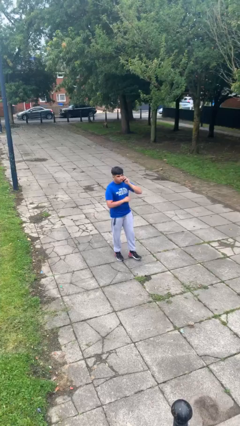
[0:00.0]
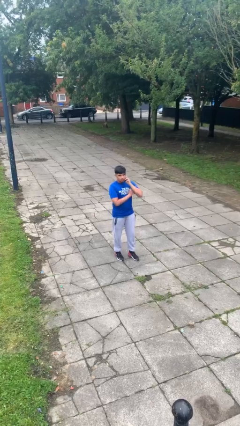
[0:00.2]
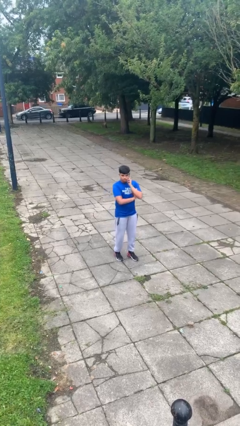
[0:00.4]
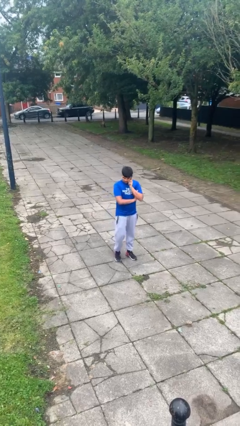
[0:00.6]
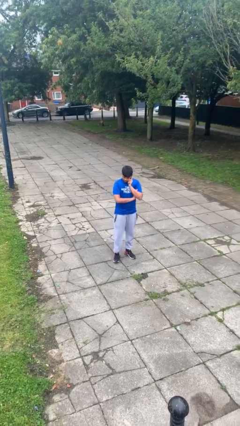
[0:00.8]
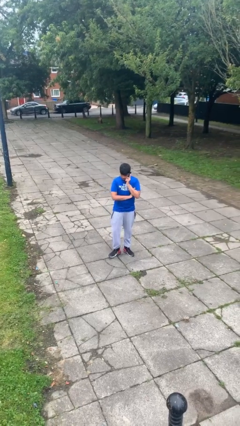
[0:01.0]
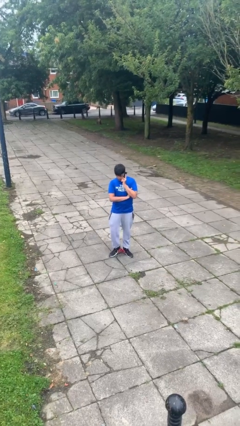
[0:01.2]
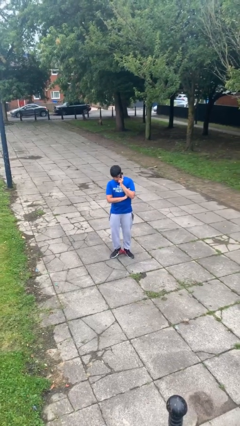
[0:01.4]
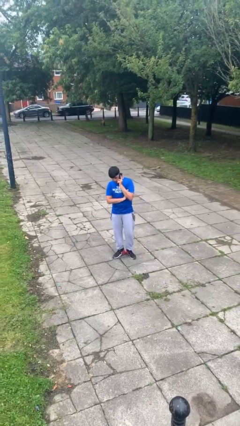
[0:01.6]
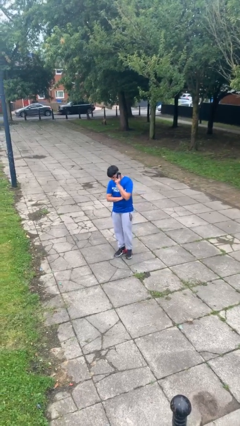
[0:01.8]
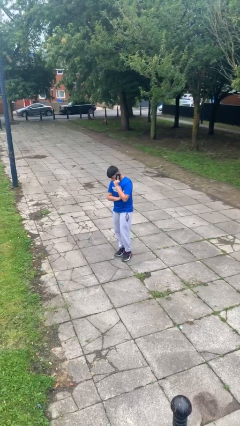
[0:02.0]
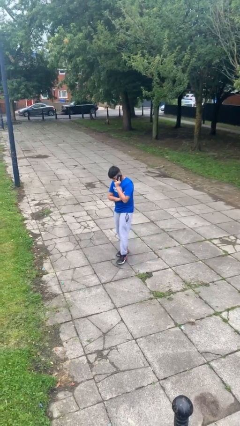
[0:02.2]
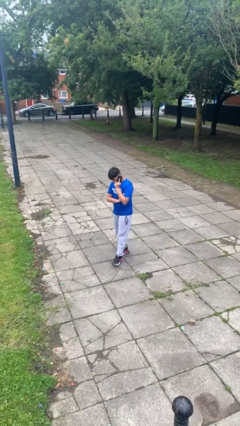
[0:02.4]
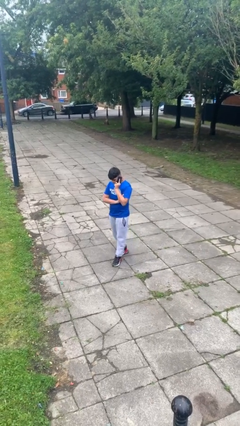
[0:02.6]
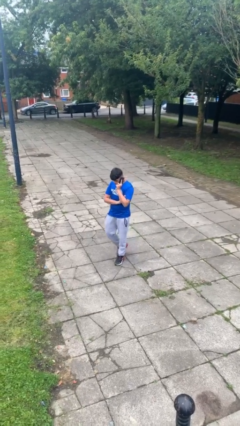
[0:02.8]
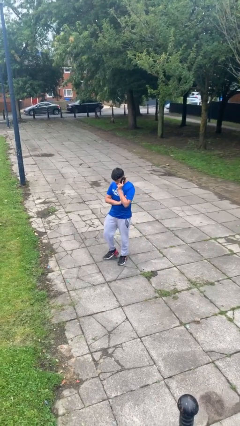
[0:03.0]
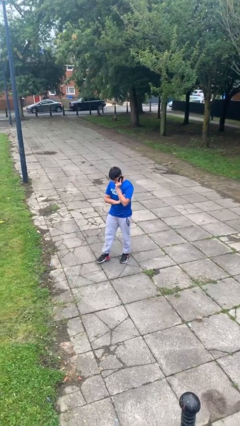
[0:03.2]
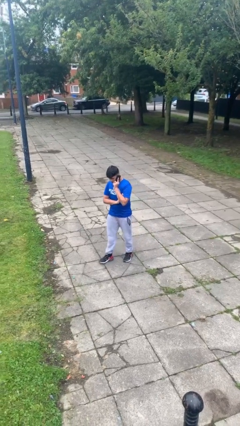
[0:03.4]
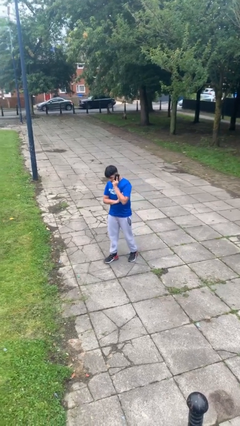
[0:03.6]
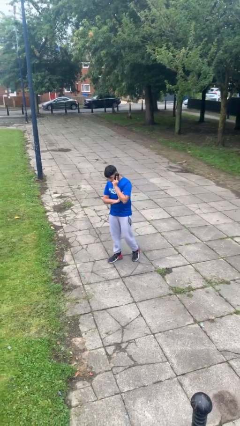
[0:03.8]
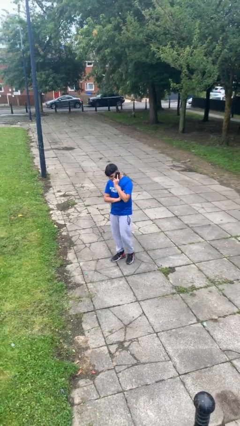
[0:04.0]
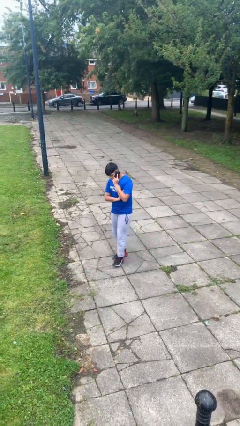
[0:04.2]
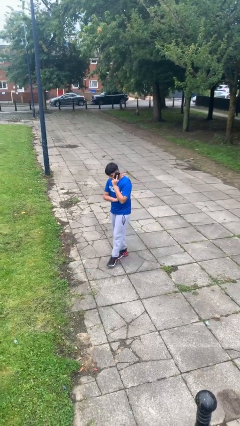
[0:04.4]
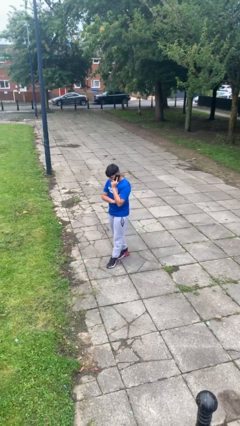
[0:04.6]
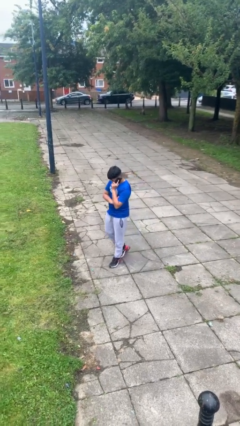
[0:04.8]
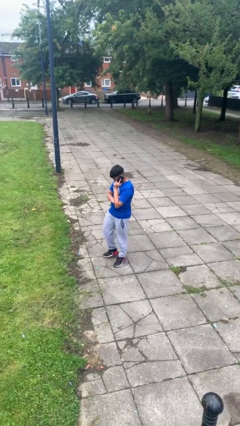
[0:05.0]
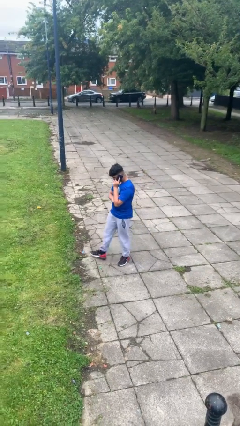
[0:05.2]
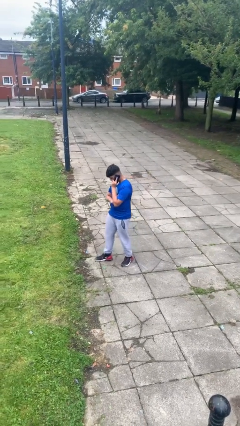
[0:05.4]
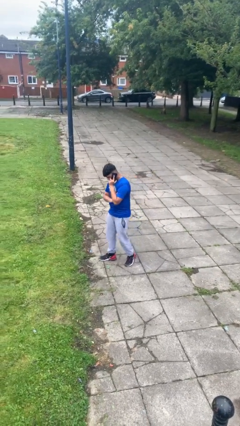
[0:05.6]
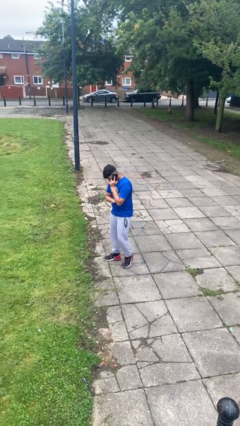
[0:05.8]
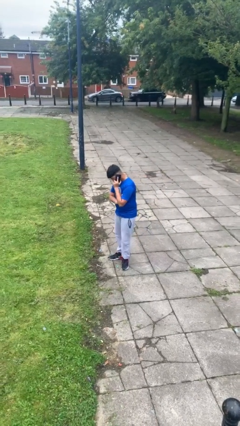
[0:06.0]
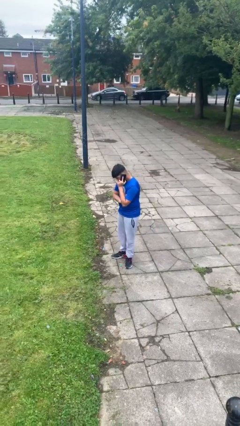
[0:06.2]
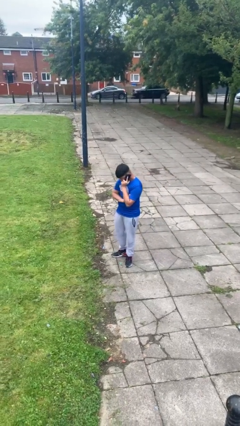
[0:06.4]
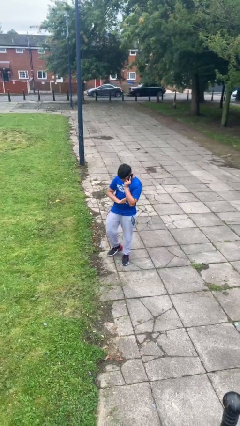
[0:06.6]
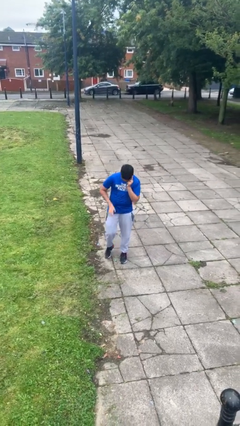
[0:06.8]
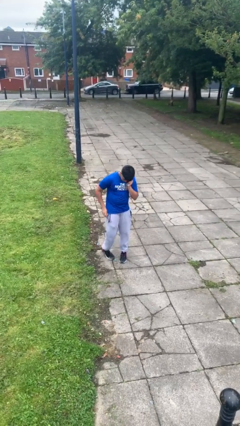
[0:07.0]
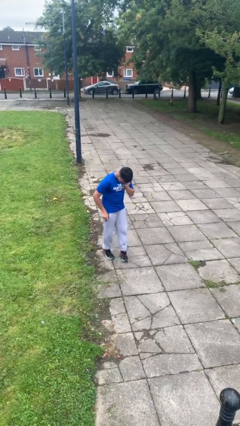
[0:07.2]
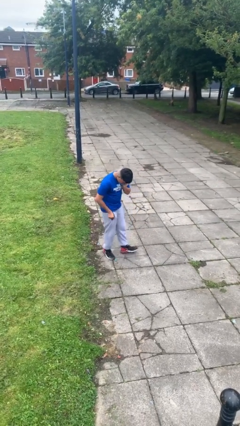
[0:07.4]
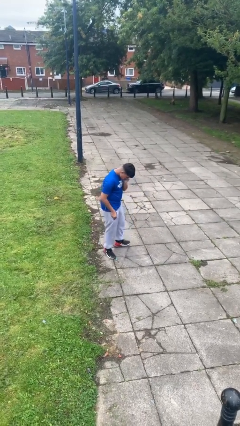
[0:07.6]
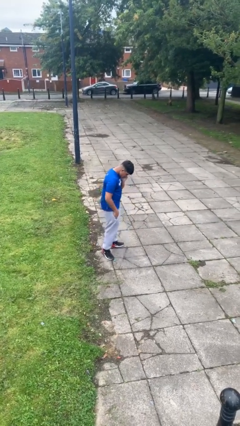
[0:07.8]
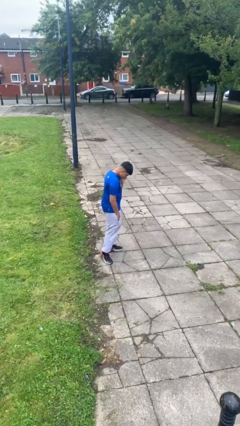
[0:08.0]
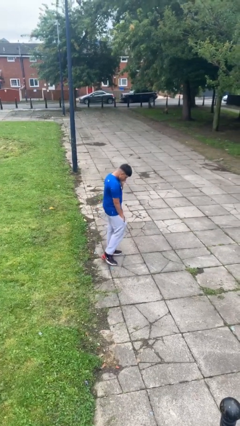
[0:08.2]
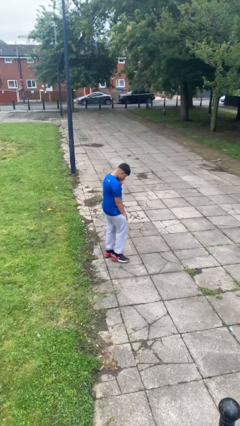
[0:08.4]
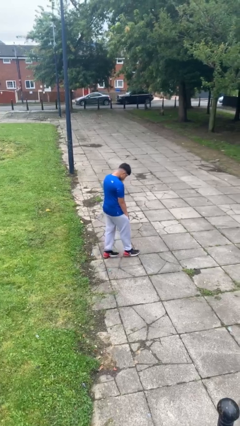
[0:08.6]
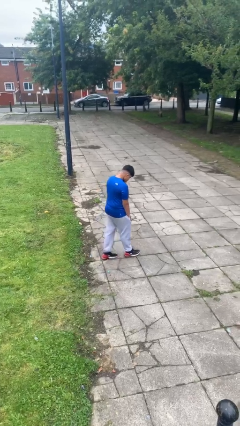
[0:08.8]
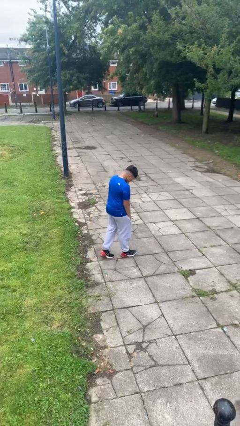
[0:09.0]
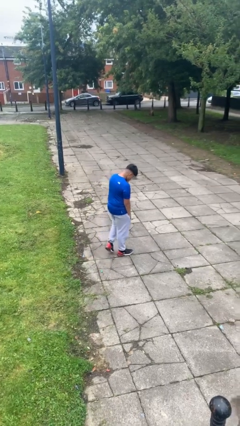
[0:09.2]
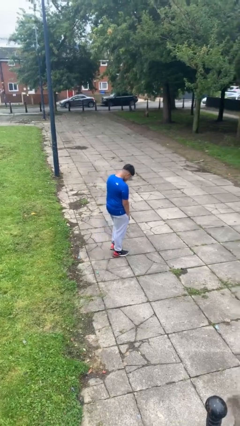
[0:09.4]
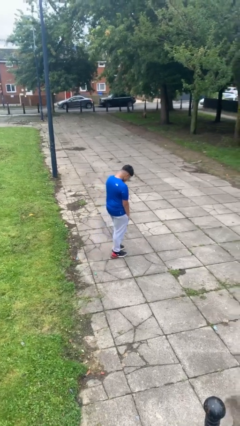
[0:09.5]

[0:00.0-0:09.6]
person talks on phone

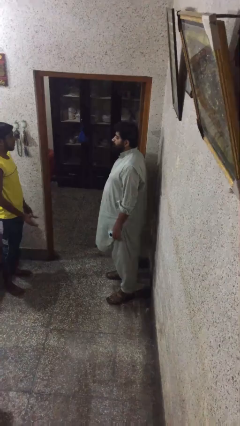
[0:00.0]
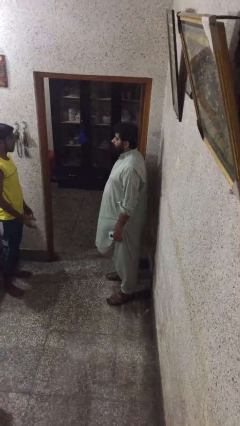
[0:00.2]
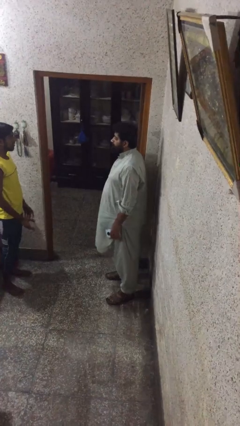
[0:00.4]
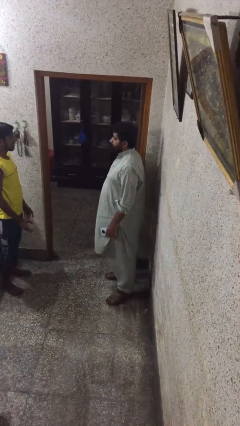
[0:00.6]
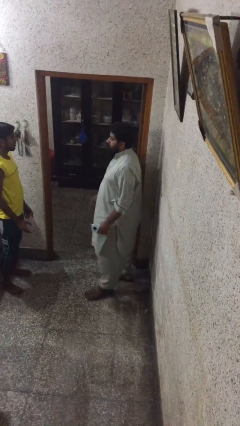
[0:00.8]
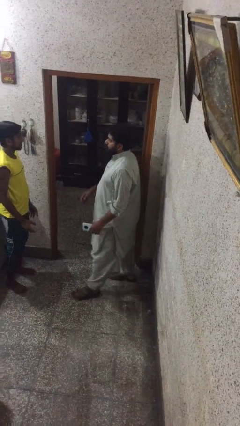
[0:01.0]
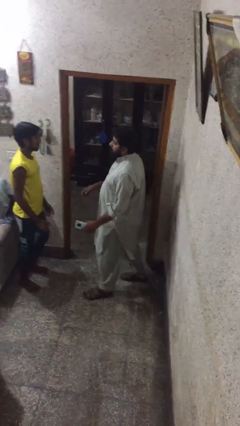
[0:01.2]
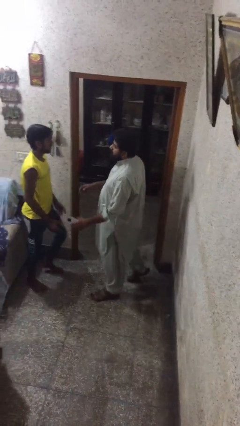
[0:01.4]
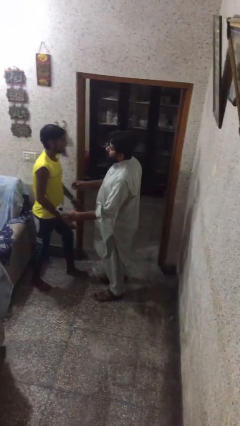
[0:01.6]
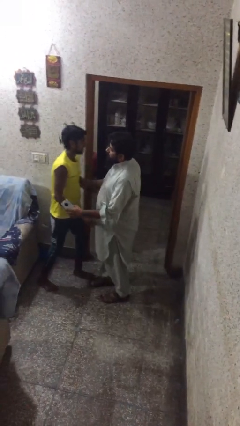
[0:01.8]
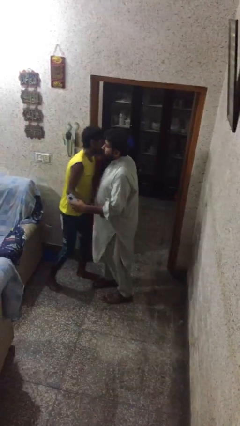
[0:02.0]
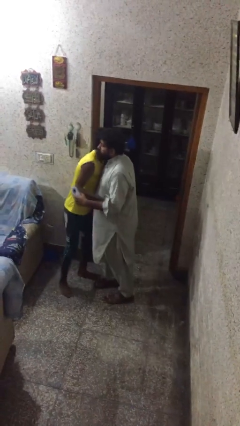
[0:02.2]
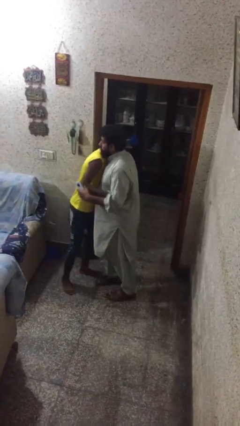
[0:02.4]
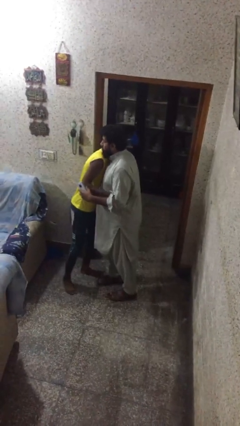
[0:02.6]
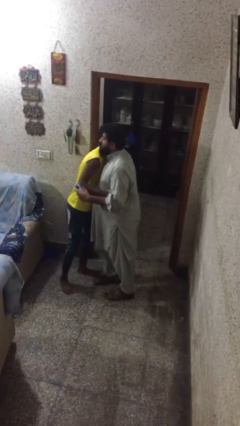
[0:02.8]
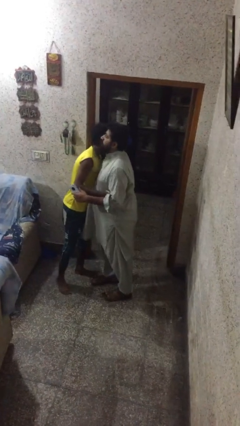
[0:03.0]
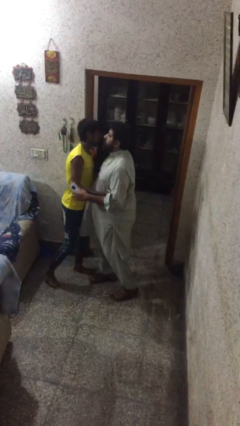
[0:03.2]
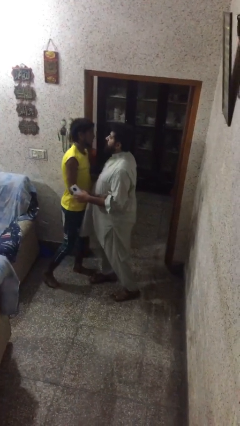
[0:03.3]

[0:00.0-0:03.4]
person embraces person

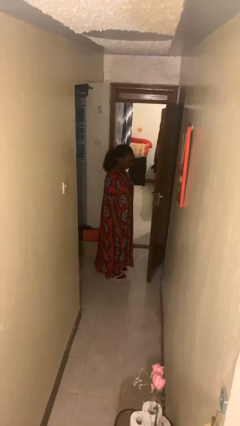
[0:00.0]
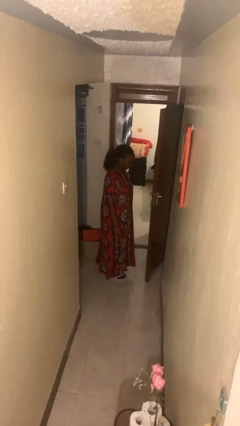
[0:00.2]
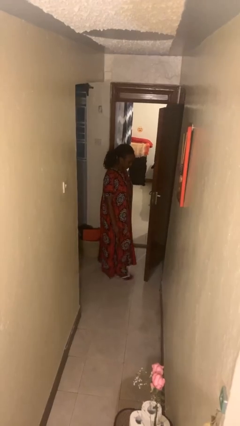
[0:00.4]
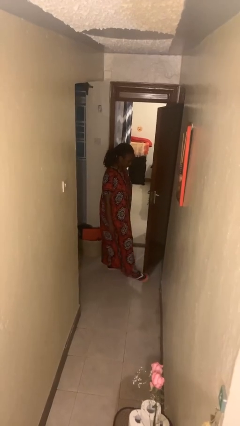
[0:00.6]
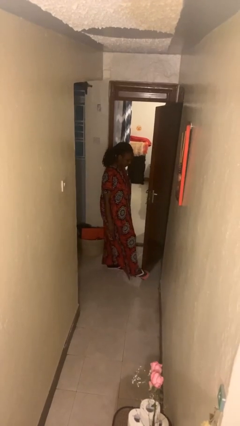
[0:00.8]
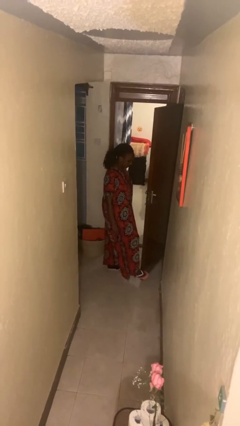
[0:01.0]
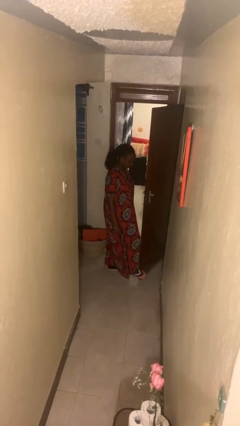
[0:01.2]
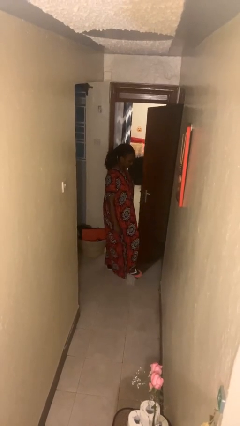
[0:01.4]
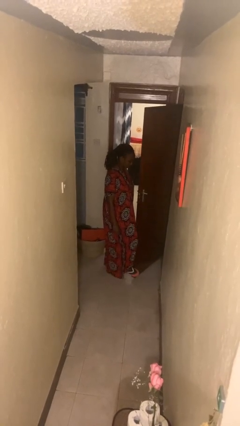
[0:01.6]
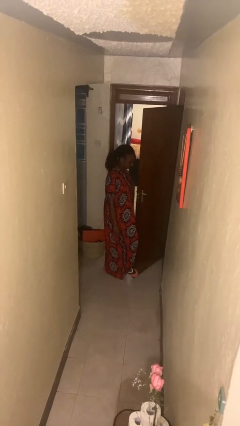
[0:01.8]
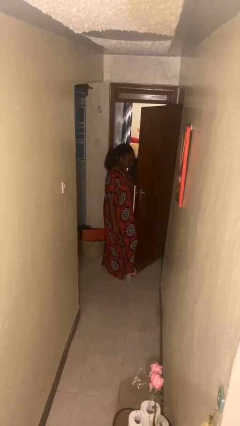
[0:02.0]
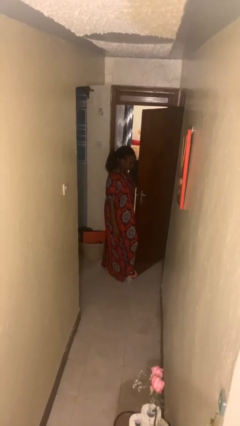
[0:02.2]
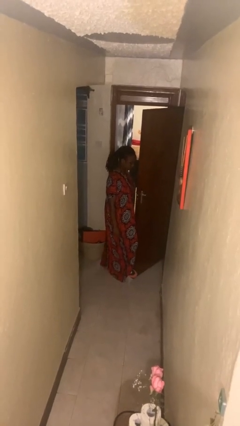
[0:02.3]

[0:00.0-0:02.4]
person opens facility door

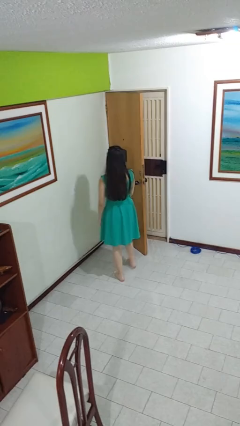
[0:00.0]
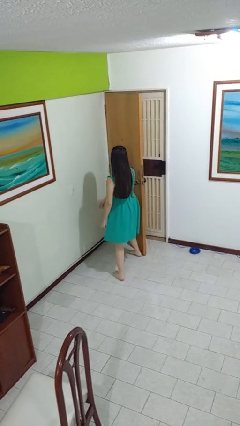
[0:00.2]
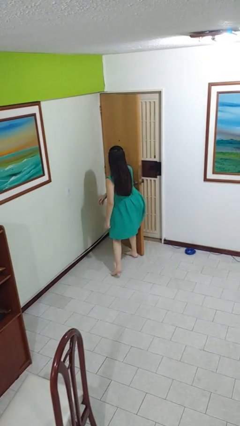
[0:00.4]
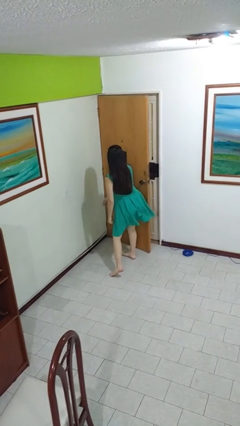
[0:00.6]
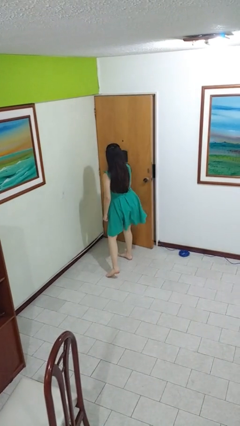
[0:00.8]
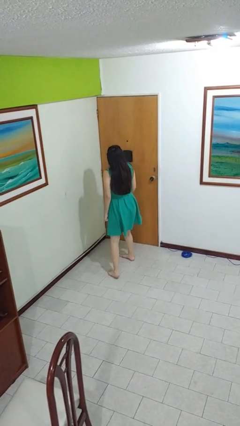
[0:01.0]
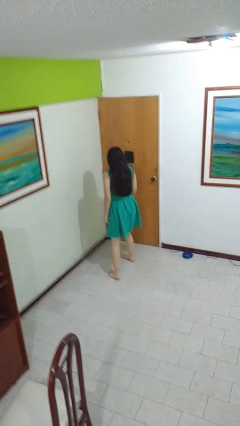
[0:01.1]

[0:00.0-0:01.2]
person closes door with hip

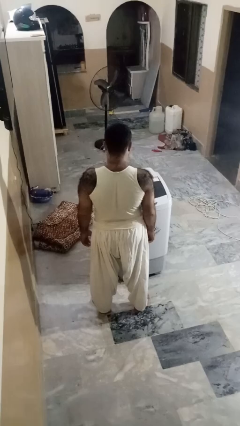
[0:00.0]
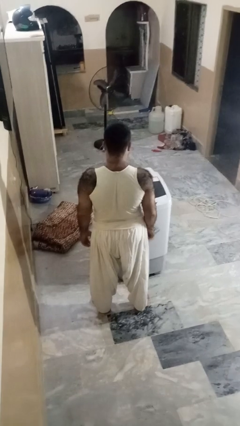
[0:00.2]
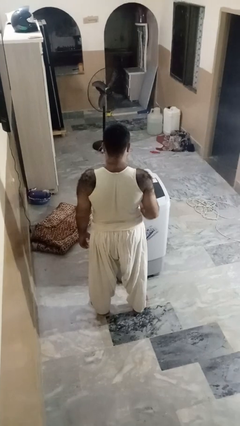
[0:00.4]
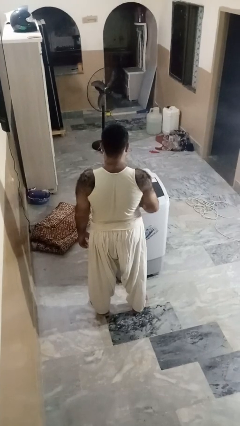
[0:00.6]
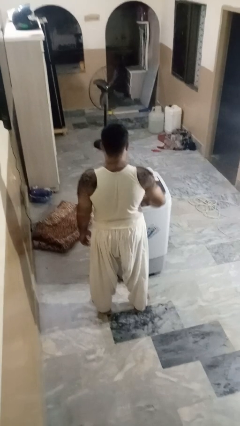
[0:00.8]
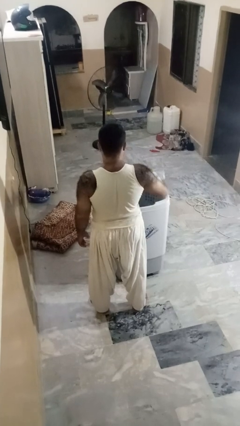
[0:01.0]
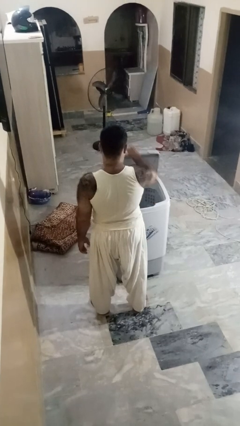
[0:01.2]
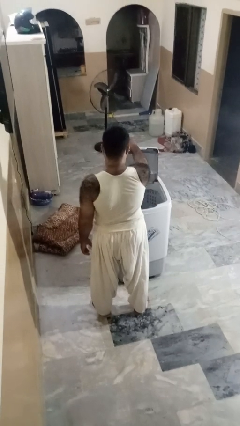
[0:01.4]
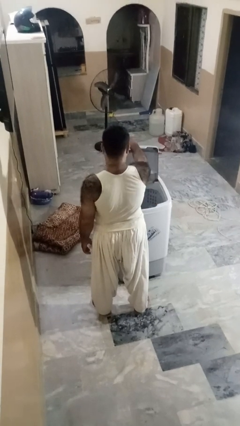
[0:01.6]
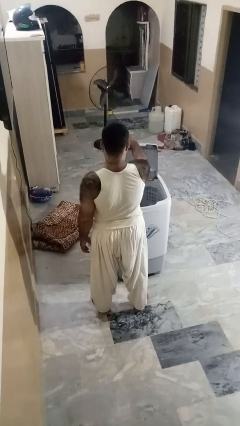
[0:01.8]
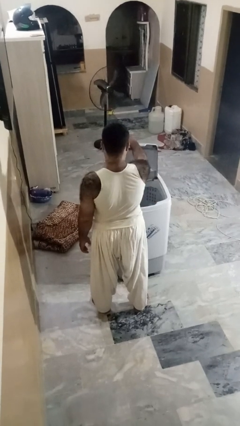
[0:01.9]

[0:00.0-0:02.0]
person opens clothes washer
